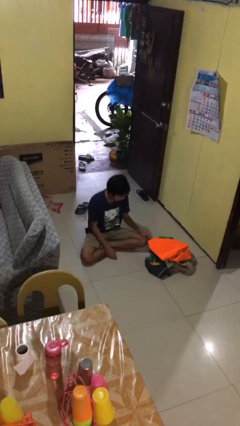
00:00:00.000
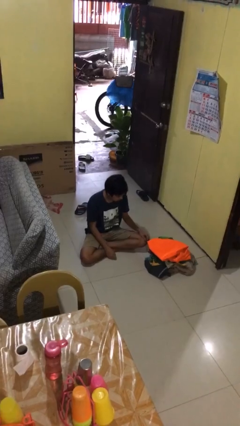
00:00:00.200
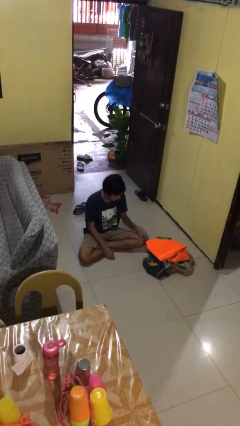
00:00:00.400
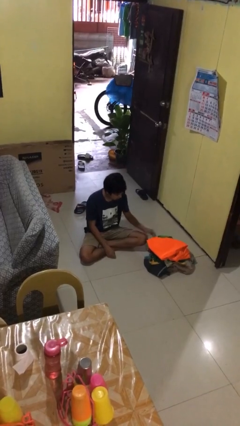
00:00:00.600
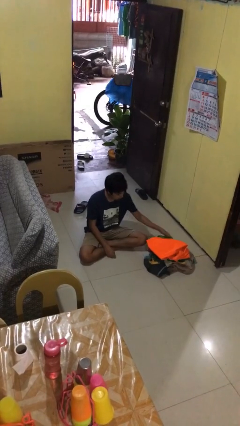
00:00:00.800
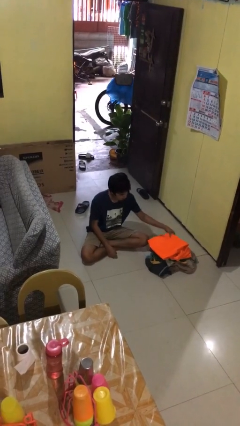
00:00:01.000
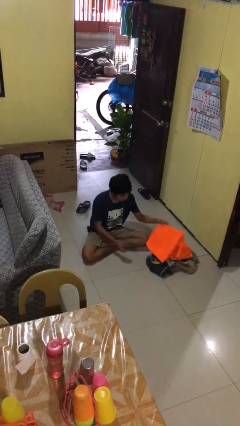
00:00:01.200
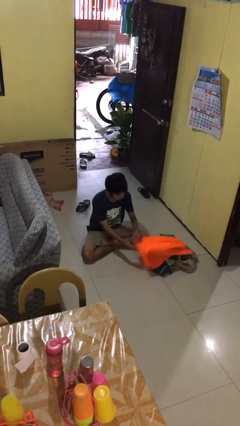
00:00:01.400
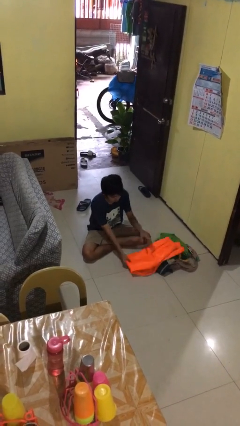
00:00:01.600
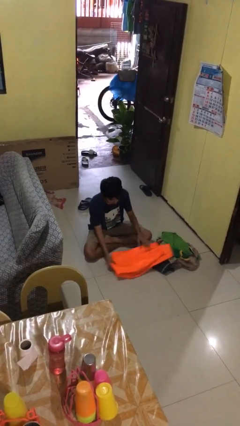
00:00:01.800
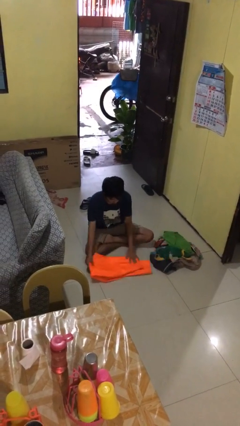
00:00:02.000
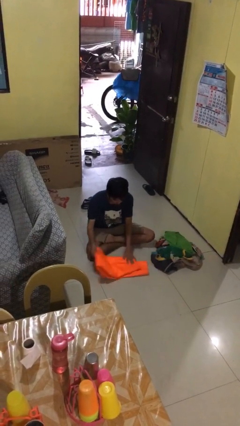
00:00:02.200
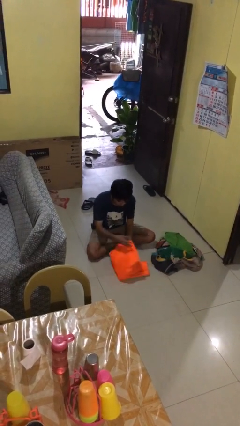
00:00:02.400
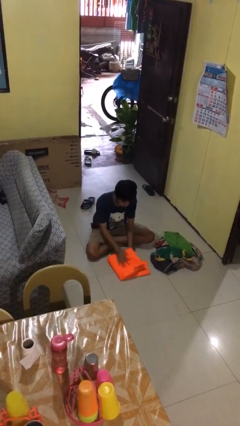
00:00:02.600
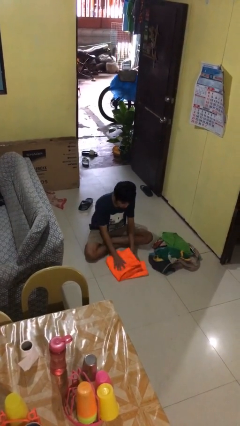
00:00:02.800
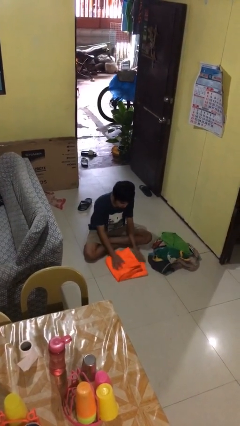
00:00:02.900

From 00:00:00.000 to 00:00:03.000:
person folds pants

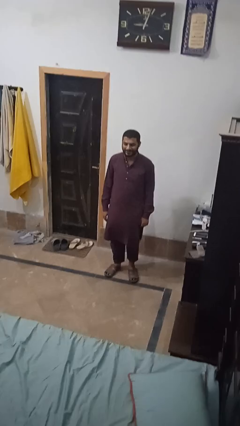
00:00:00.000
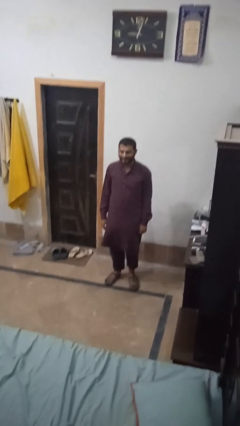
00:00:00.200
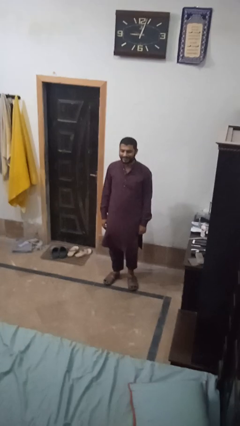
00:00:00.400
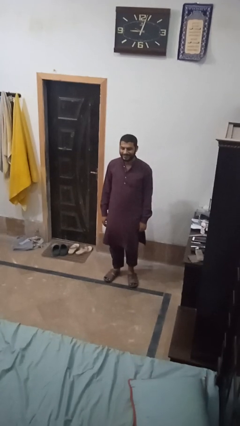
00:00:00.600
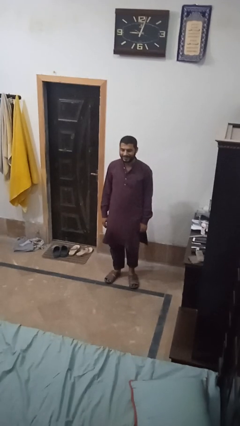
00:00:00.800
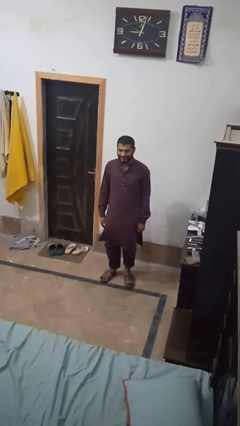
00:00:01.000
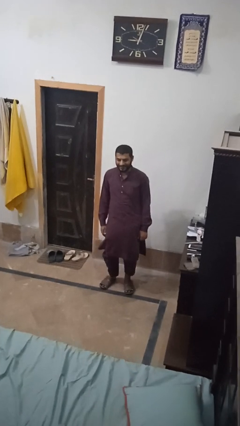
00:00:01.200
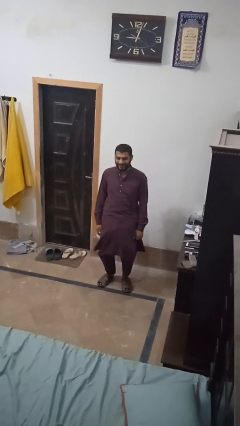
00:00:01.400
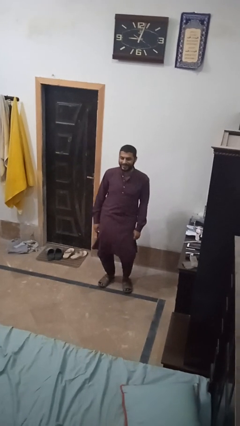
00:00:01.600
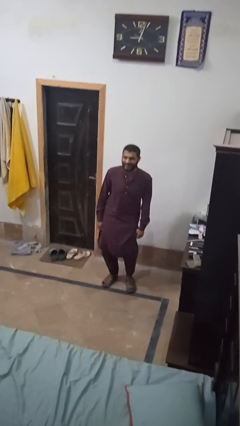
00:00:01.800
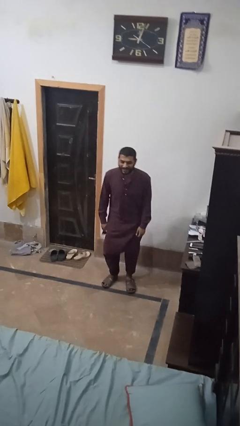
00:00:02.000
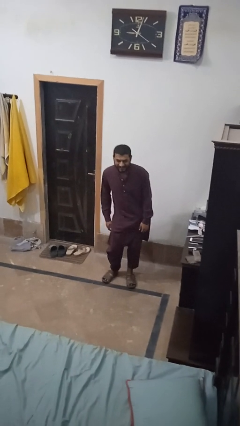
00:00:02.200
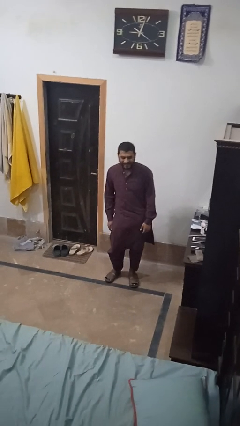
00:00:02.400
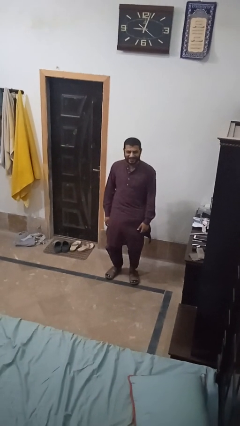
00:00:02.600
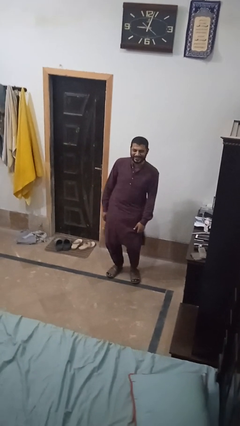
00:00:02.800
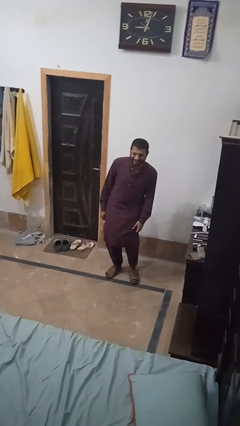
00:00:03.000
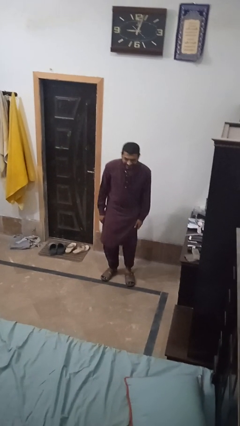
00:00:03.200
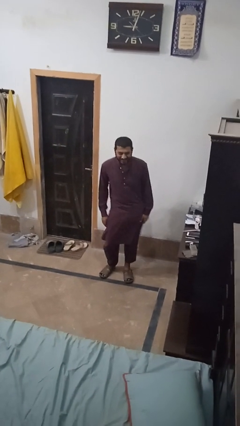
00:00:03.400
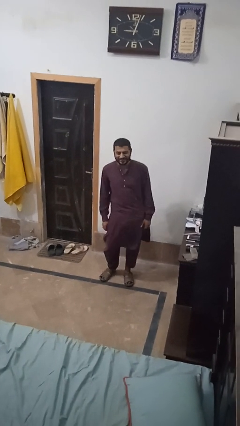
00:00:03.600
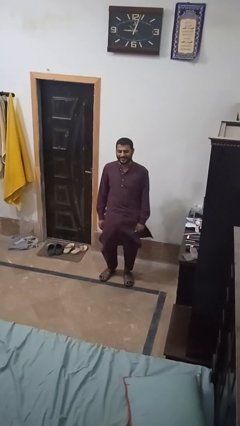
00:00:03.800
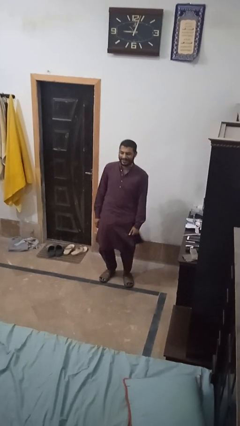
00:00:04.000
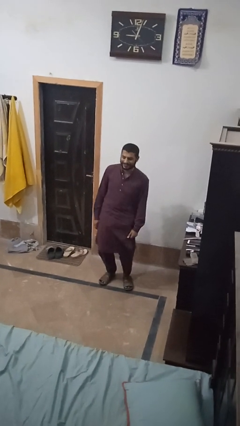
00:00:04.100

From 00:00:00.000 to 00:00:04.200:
person wiggles hips

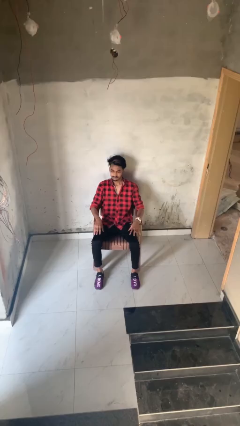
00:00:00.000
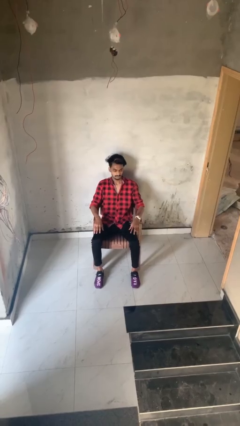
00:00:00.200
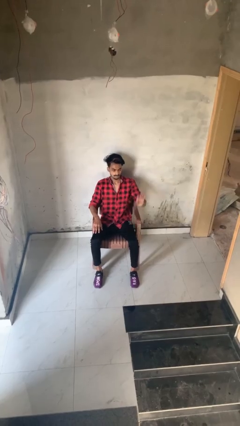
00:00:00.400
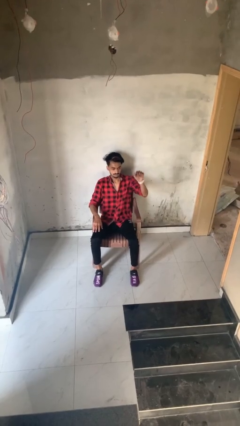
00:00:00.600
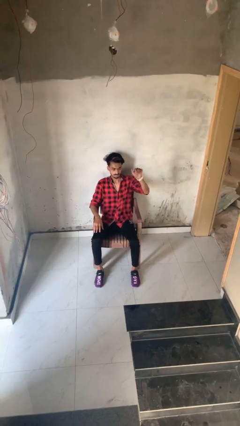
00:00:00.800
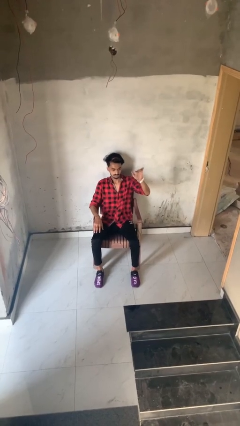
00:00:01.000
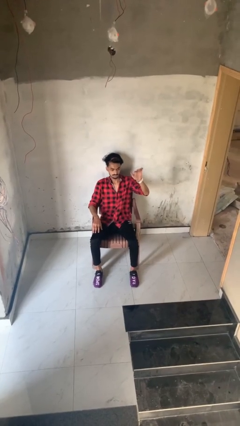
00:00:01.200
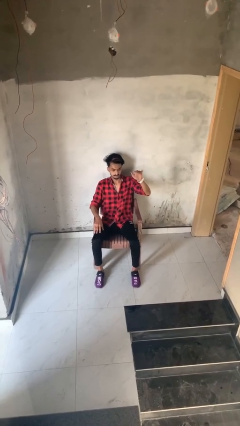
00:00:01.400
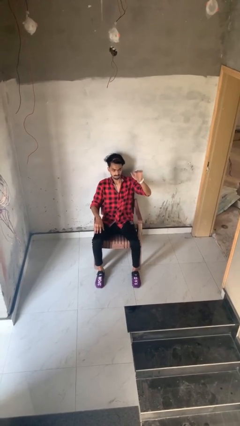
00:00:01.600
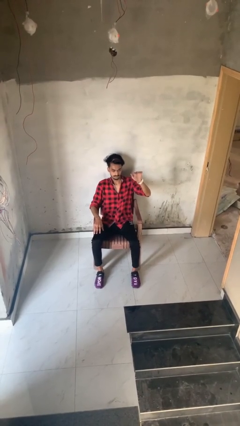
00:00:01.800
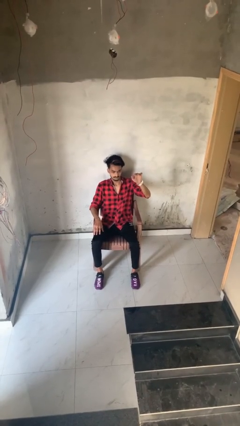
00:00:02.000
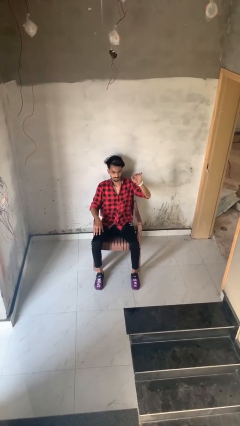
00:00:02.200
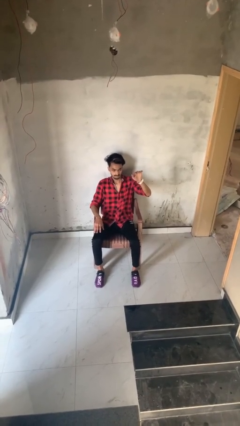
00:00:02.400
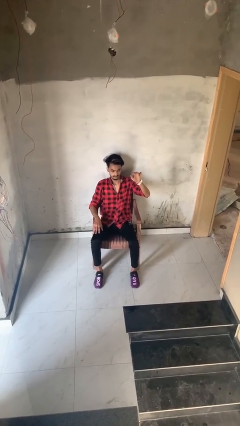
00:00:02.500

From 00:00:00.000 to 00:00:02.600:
person gestures come here

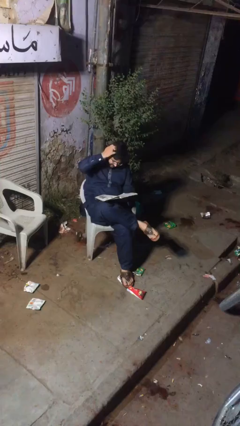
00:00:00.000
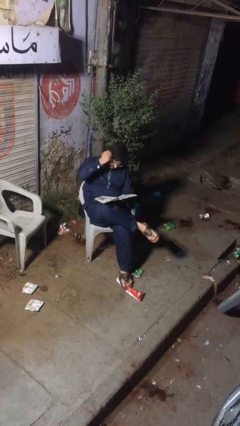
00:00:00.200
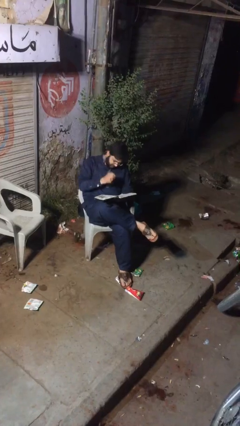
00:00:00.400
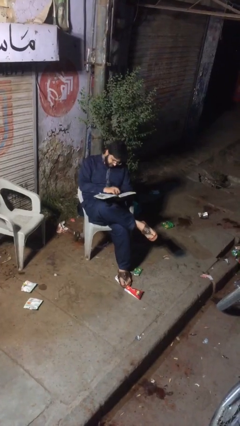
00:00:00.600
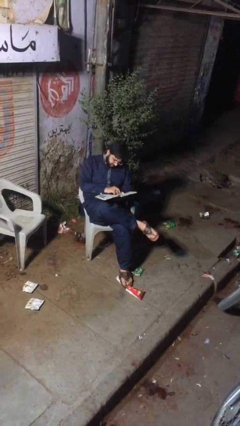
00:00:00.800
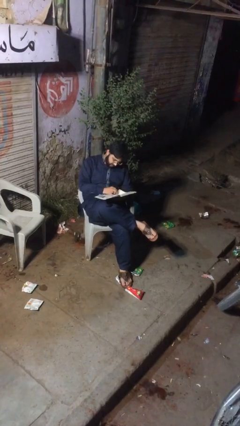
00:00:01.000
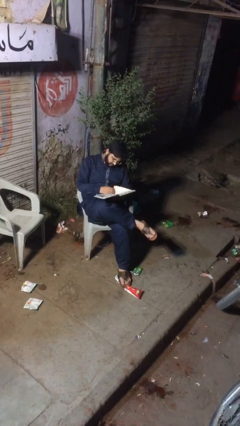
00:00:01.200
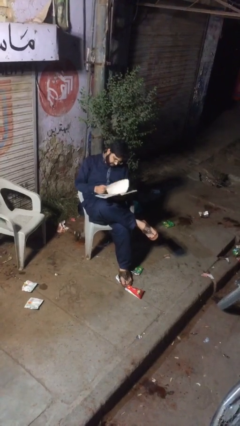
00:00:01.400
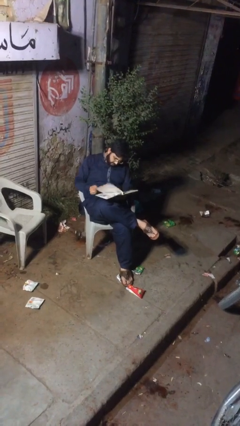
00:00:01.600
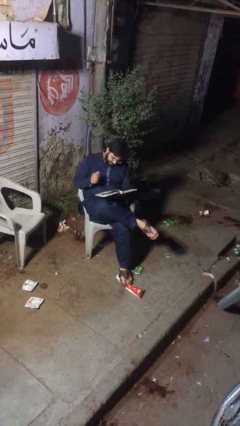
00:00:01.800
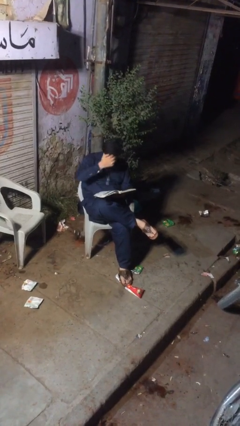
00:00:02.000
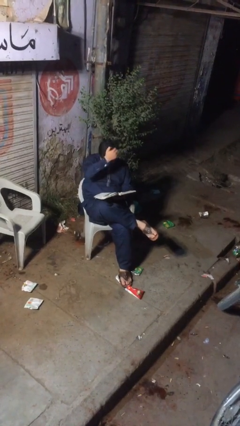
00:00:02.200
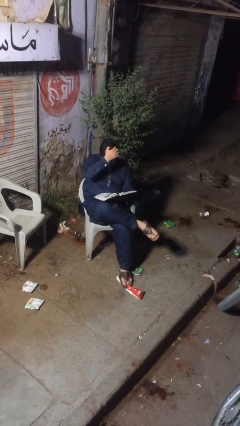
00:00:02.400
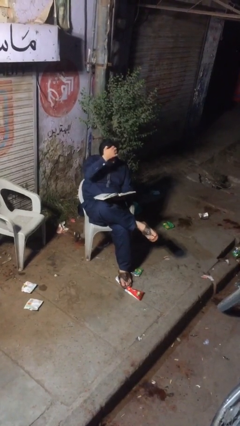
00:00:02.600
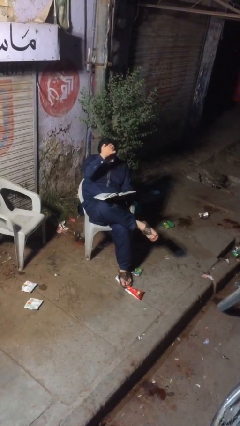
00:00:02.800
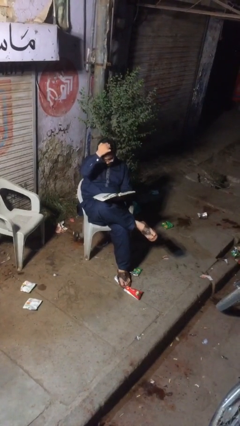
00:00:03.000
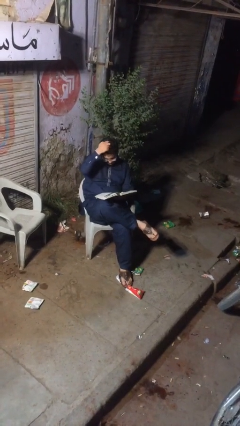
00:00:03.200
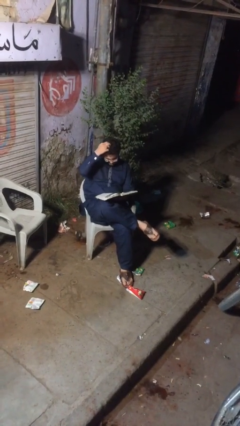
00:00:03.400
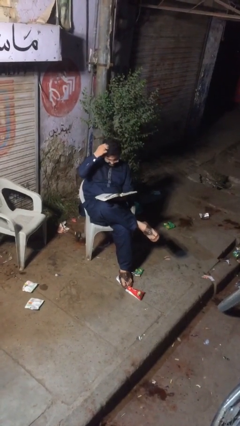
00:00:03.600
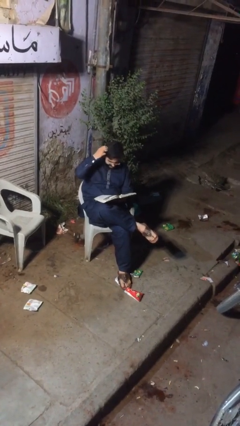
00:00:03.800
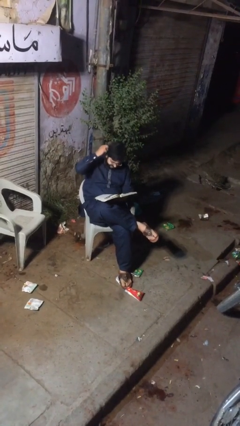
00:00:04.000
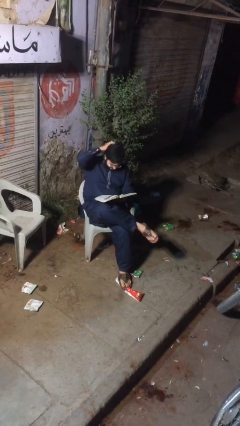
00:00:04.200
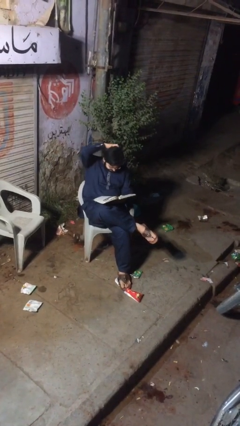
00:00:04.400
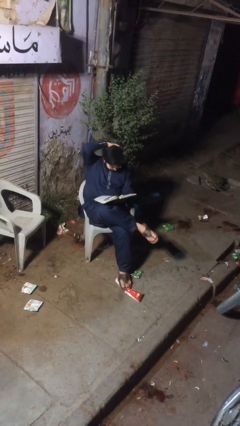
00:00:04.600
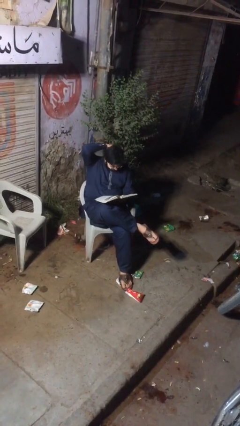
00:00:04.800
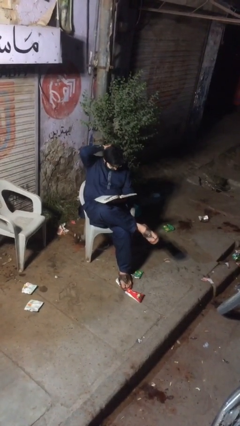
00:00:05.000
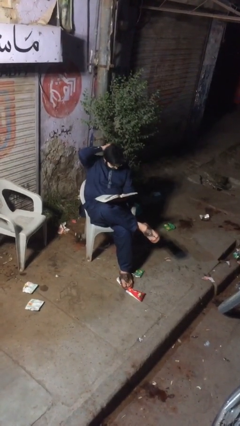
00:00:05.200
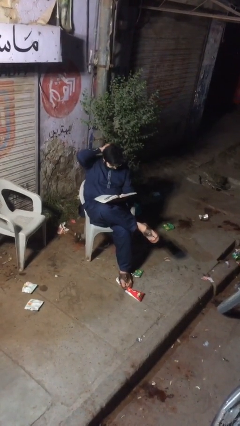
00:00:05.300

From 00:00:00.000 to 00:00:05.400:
person reads document

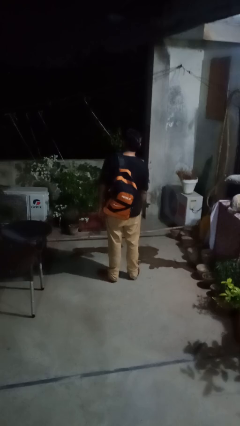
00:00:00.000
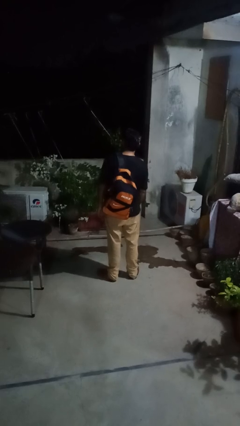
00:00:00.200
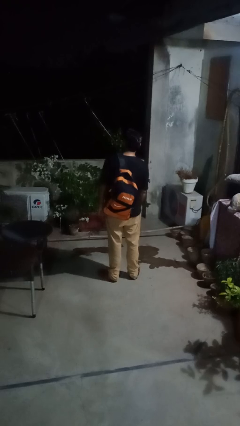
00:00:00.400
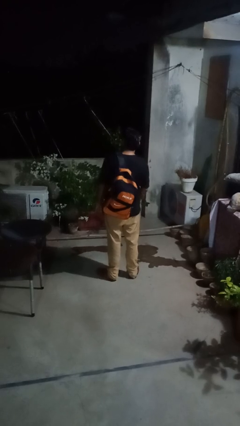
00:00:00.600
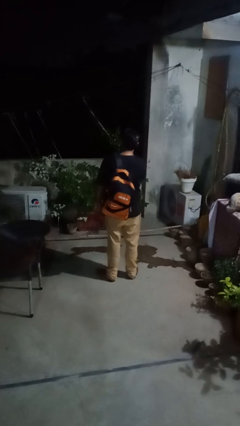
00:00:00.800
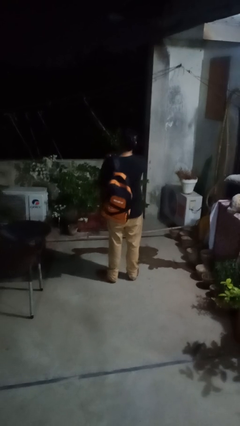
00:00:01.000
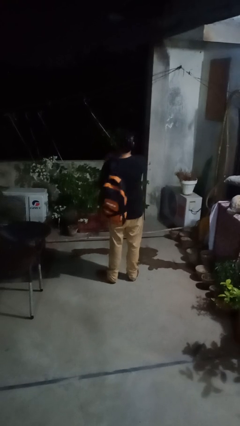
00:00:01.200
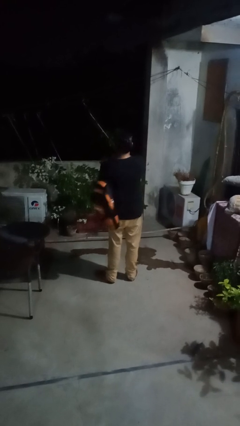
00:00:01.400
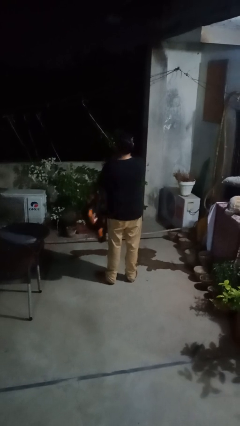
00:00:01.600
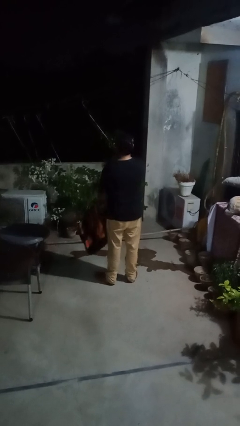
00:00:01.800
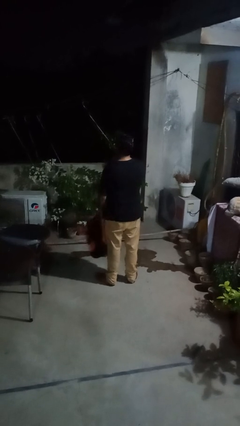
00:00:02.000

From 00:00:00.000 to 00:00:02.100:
person takes off backpack

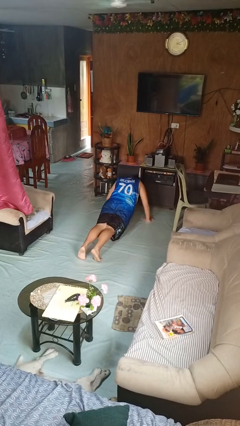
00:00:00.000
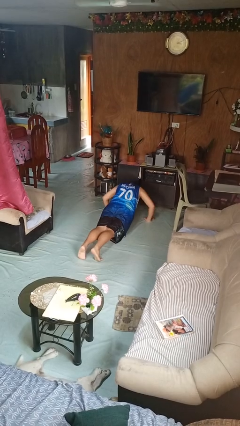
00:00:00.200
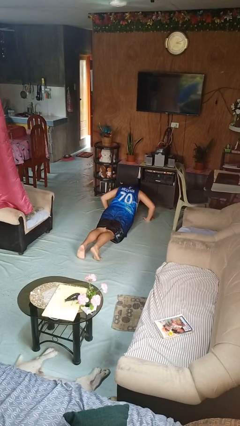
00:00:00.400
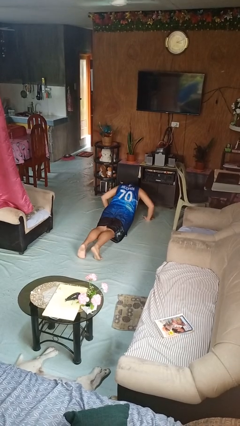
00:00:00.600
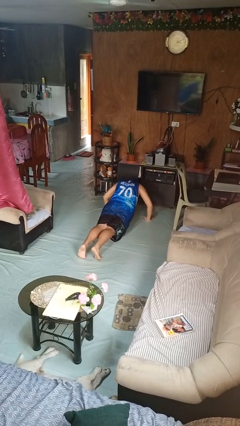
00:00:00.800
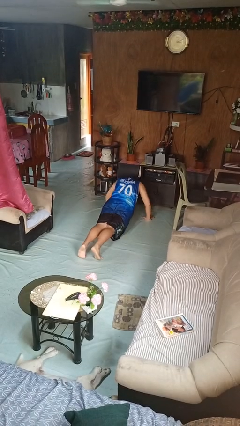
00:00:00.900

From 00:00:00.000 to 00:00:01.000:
person exercises with pushup
